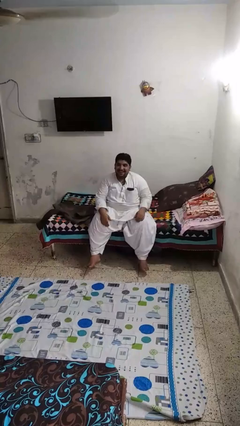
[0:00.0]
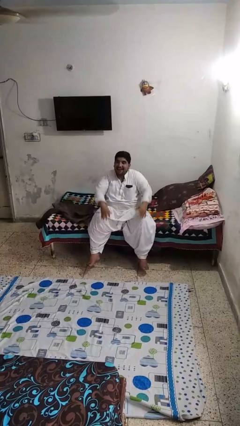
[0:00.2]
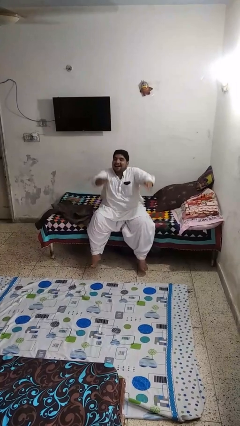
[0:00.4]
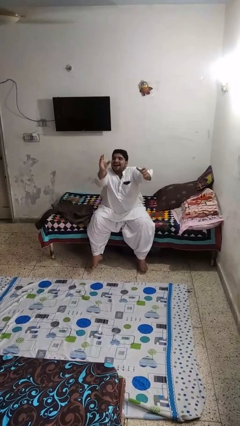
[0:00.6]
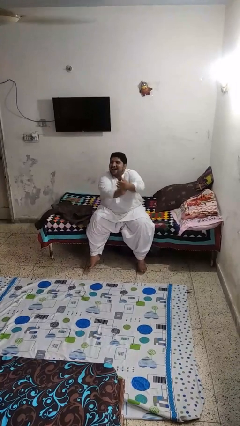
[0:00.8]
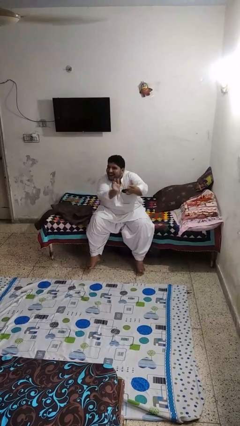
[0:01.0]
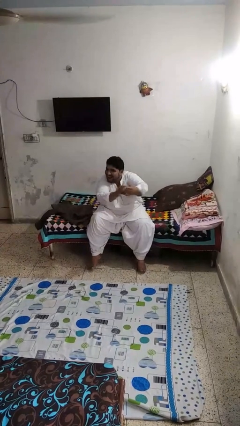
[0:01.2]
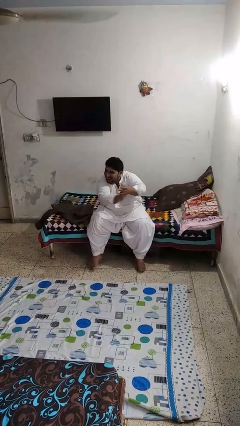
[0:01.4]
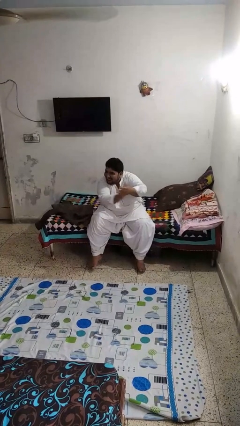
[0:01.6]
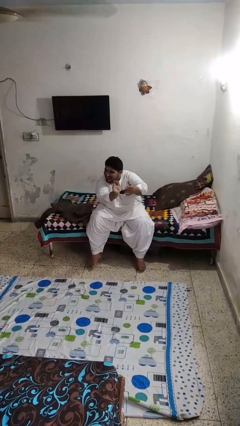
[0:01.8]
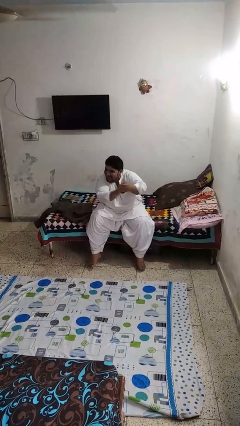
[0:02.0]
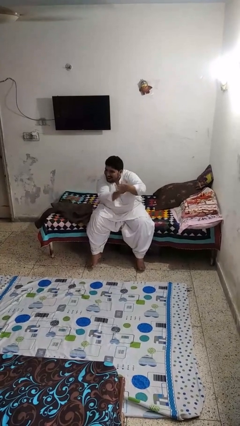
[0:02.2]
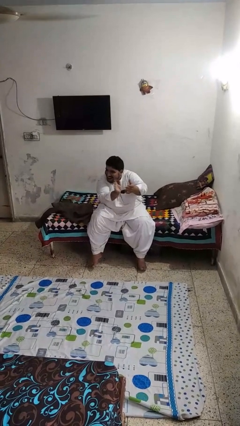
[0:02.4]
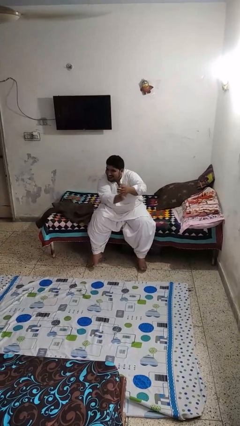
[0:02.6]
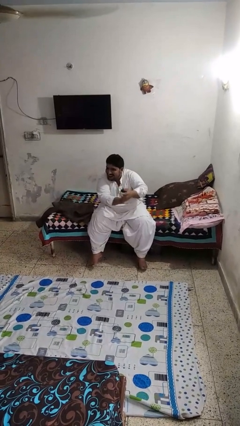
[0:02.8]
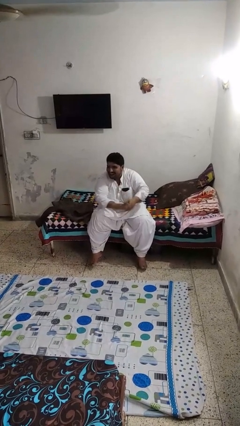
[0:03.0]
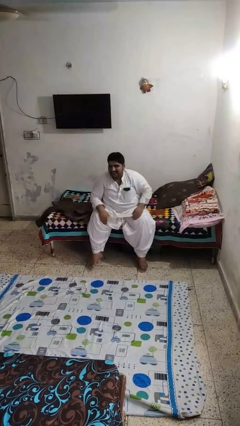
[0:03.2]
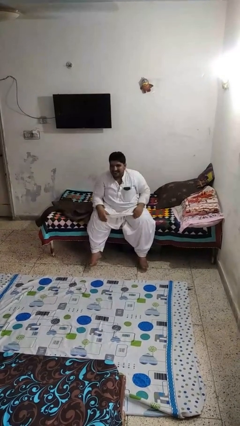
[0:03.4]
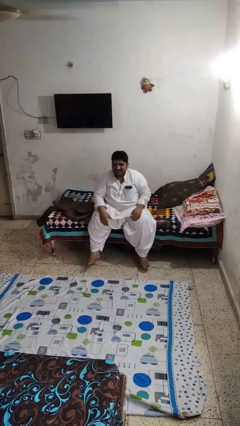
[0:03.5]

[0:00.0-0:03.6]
person claps hands

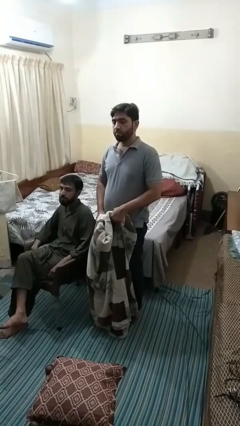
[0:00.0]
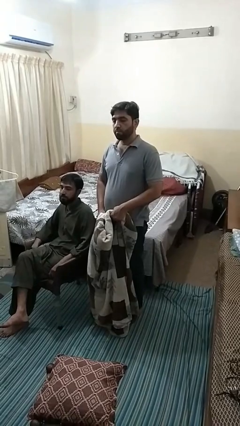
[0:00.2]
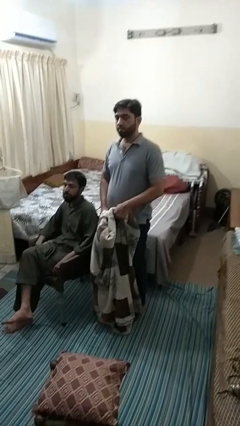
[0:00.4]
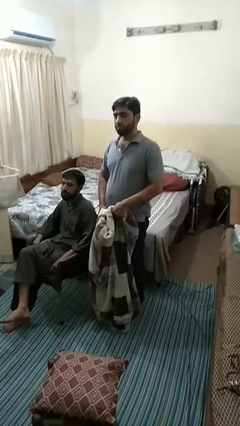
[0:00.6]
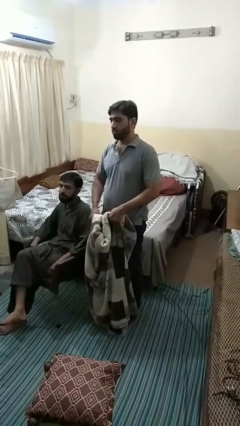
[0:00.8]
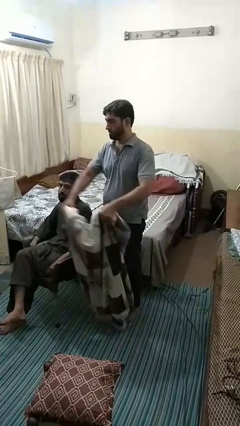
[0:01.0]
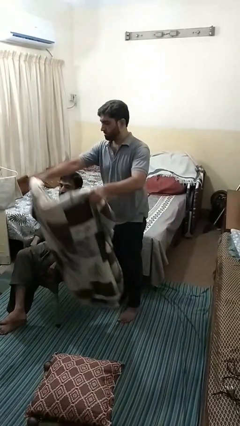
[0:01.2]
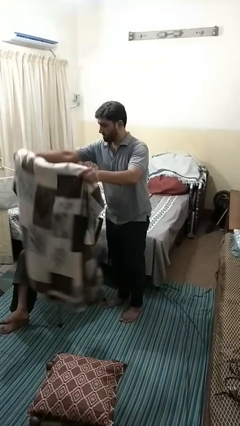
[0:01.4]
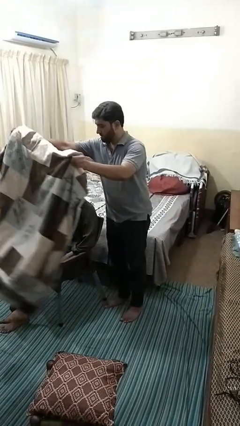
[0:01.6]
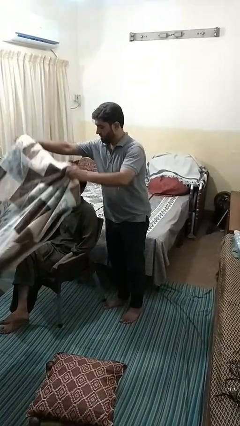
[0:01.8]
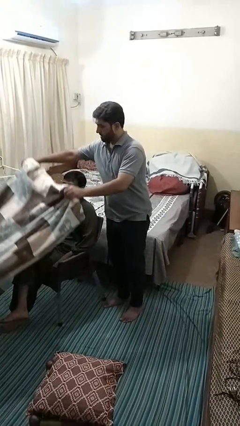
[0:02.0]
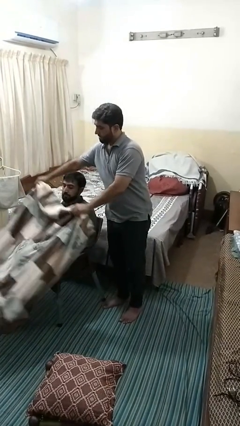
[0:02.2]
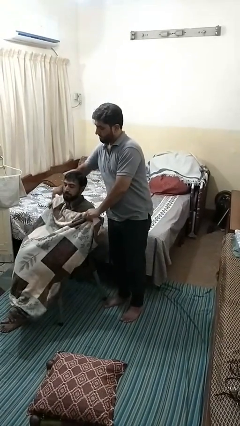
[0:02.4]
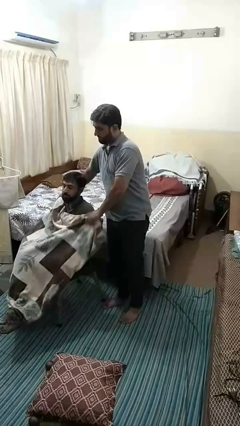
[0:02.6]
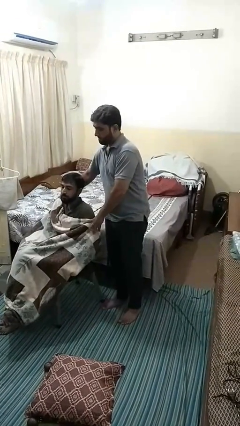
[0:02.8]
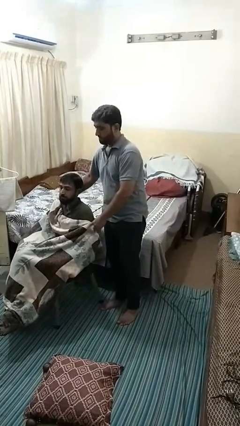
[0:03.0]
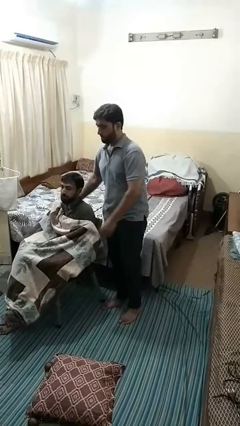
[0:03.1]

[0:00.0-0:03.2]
person covers friend with blanket

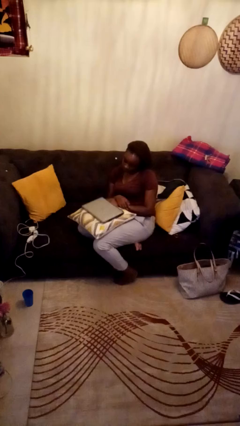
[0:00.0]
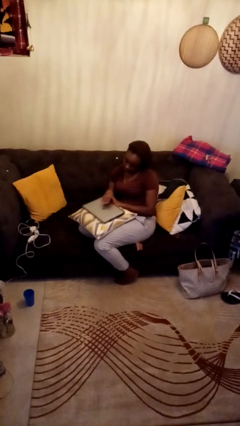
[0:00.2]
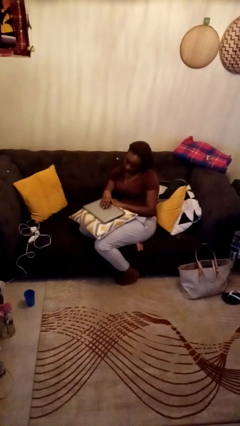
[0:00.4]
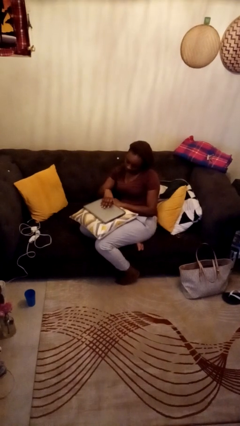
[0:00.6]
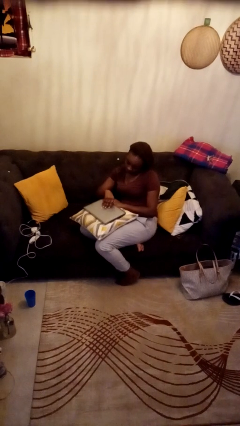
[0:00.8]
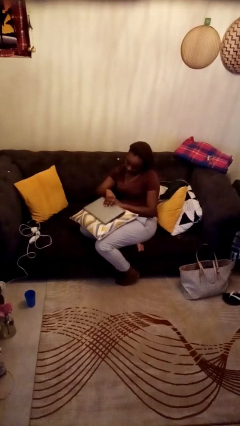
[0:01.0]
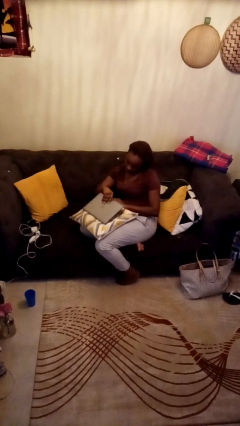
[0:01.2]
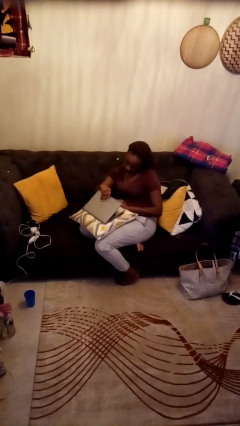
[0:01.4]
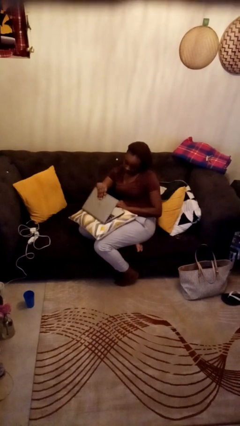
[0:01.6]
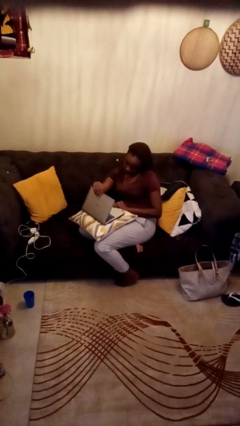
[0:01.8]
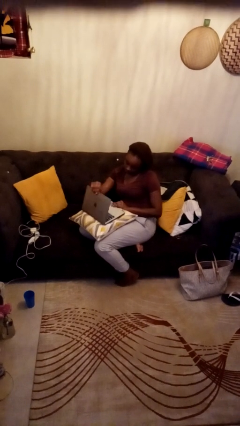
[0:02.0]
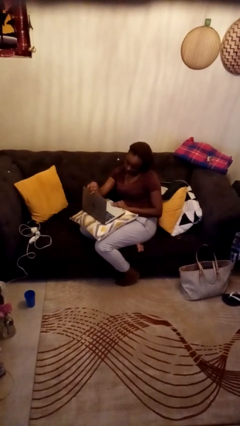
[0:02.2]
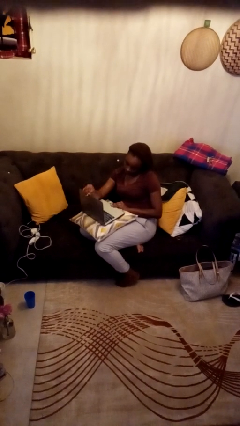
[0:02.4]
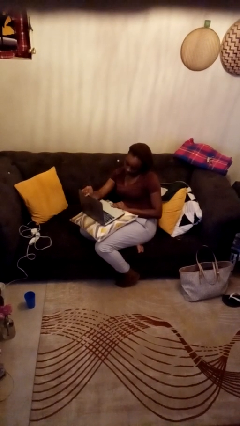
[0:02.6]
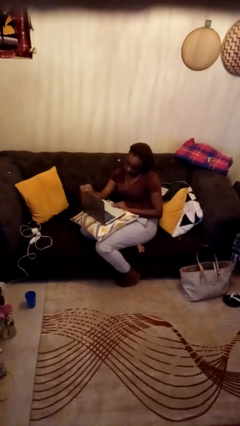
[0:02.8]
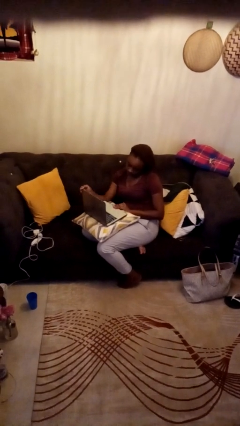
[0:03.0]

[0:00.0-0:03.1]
person opens laptop

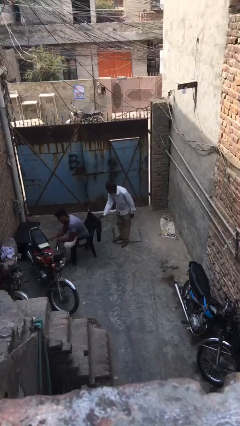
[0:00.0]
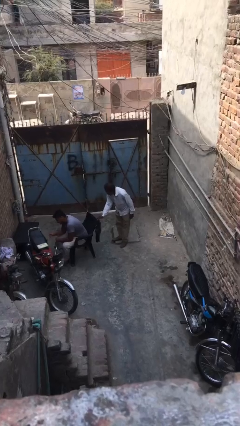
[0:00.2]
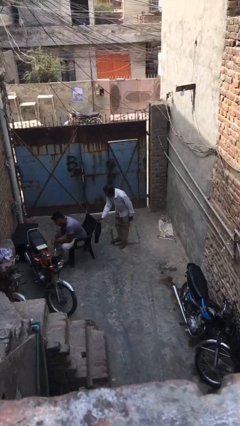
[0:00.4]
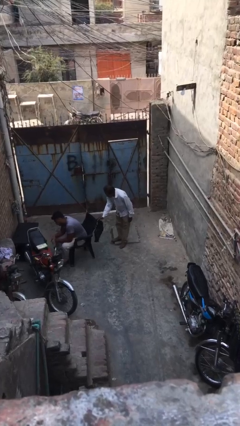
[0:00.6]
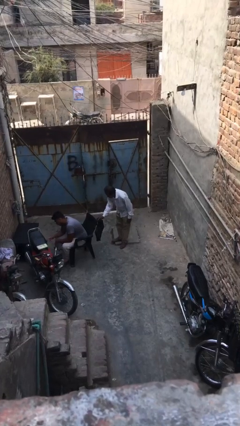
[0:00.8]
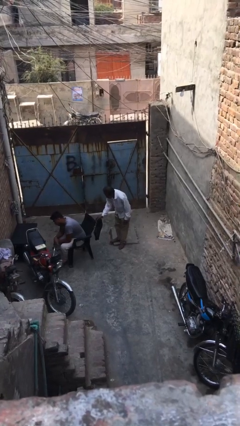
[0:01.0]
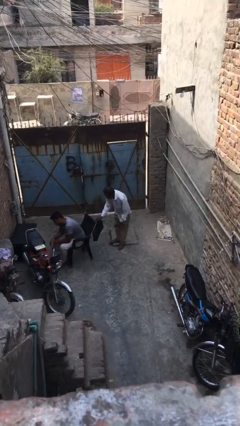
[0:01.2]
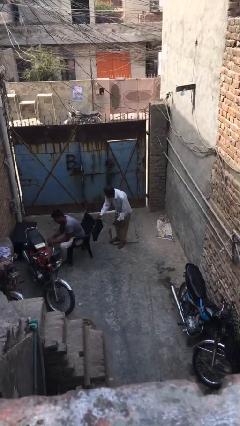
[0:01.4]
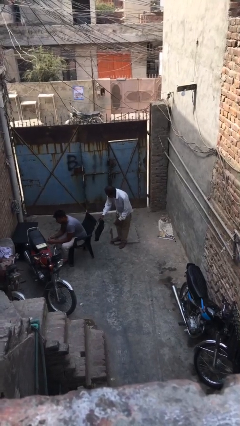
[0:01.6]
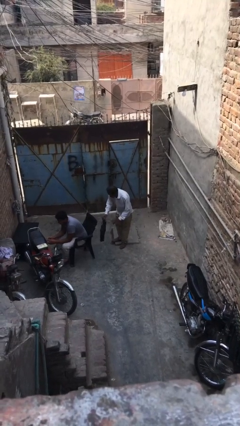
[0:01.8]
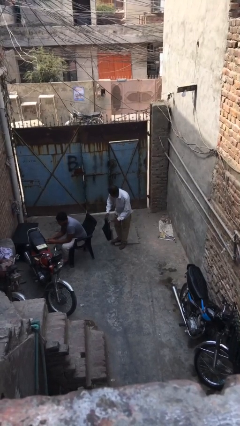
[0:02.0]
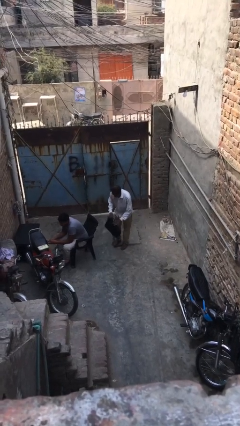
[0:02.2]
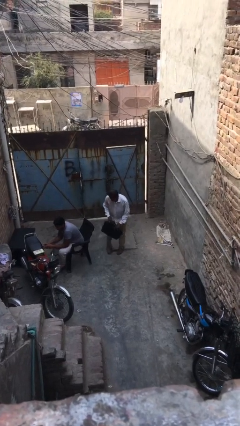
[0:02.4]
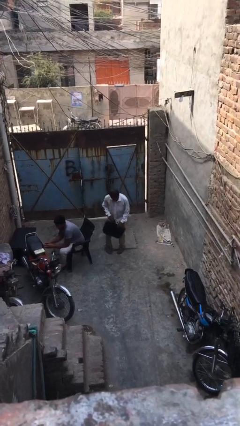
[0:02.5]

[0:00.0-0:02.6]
person steals object from person

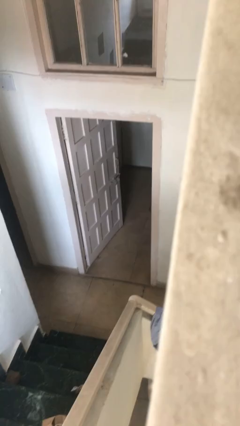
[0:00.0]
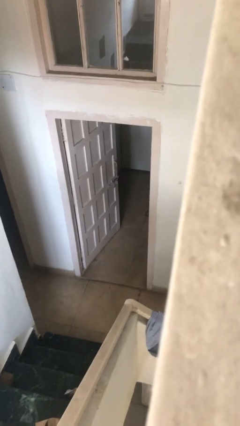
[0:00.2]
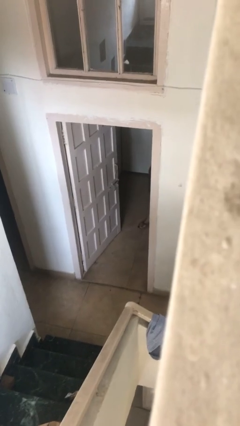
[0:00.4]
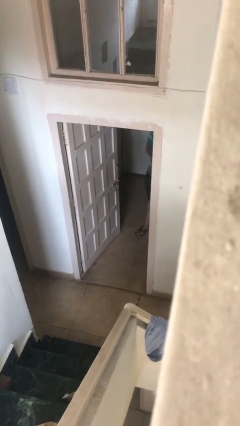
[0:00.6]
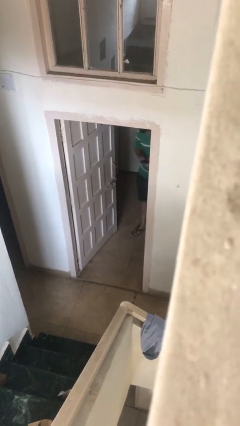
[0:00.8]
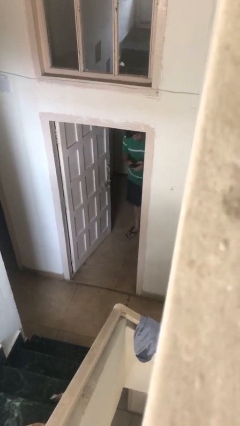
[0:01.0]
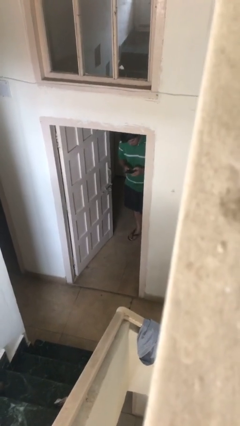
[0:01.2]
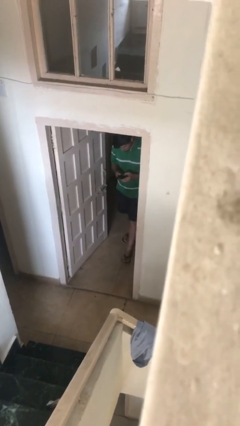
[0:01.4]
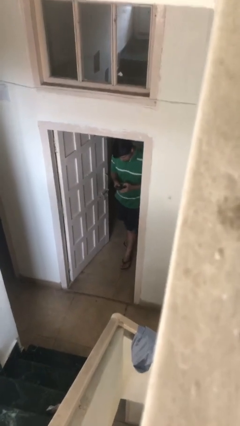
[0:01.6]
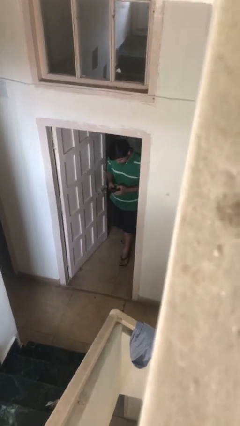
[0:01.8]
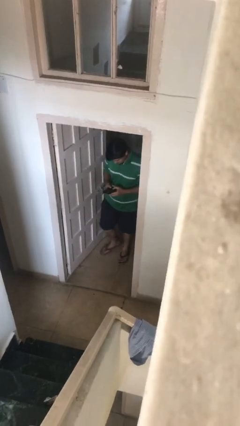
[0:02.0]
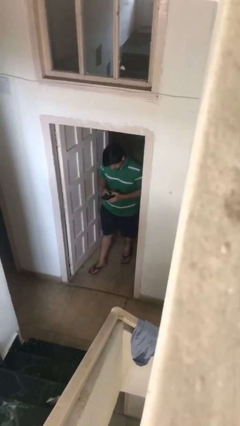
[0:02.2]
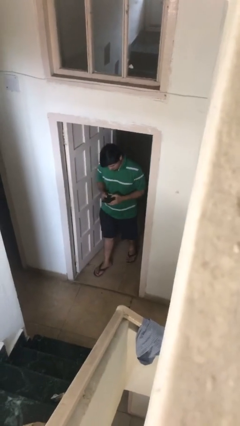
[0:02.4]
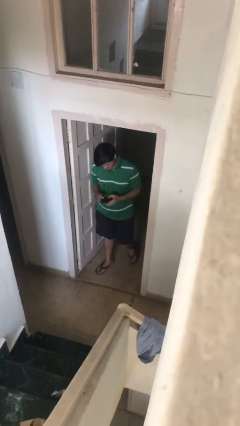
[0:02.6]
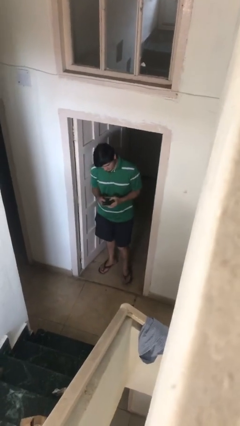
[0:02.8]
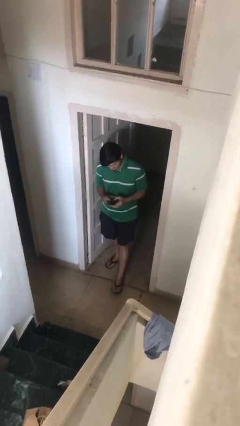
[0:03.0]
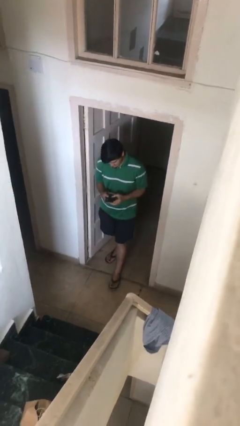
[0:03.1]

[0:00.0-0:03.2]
person enters scene through structure

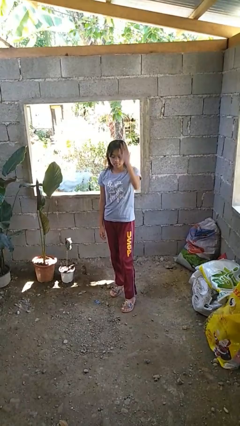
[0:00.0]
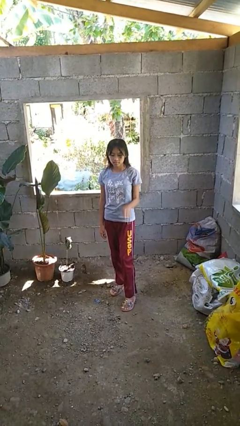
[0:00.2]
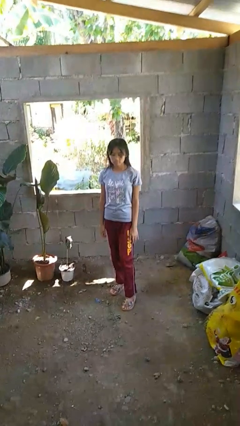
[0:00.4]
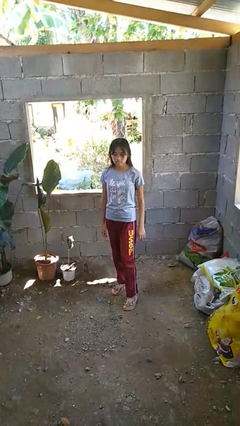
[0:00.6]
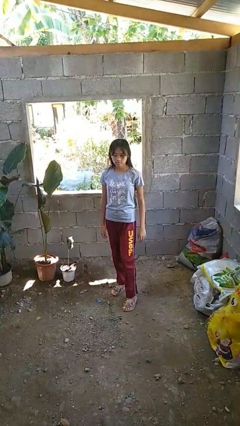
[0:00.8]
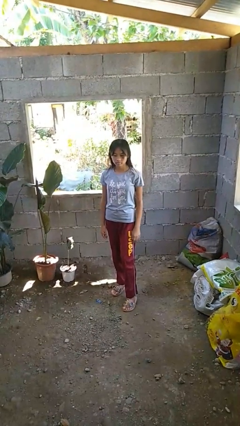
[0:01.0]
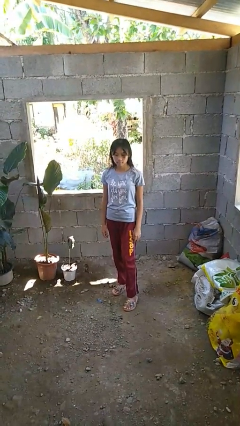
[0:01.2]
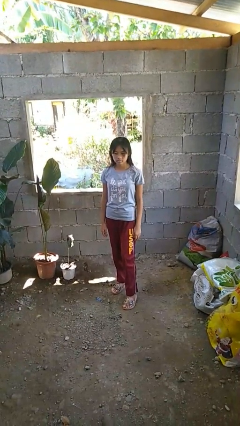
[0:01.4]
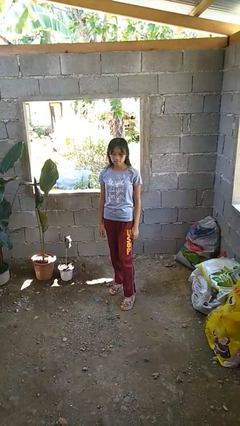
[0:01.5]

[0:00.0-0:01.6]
person gestures lower hand
